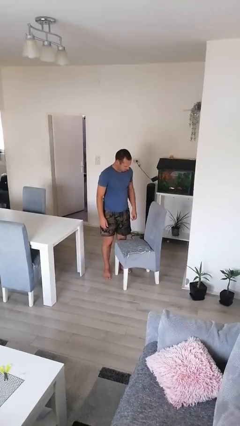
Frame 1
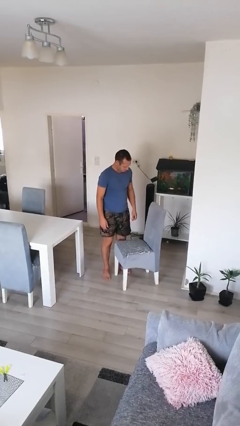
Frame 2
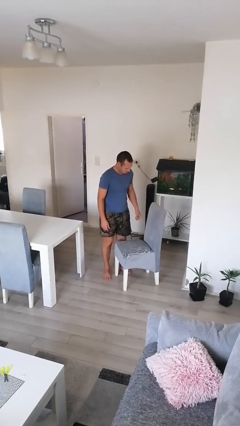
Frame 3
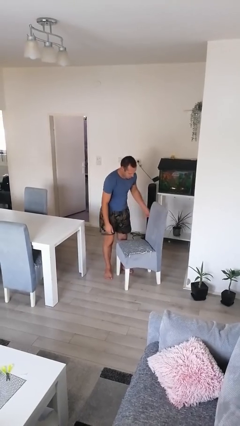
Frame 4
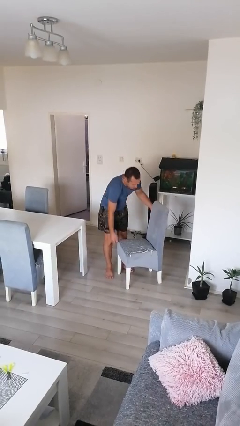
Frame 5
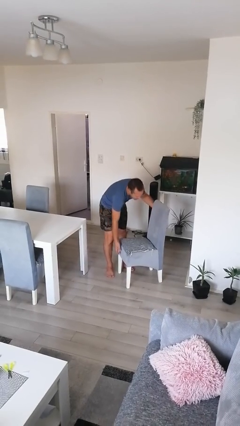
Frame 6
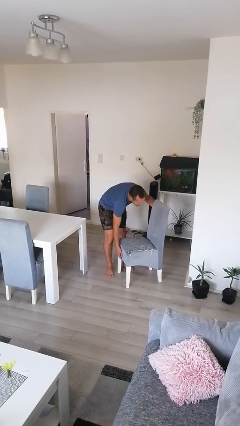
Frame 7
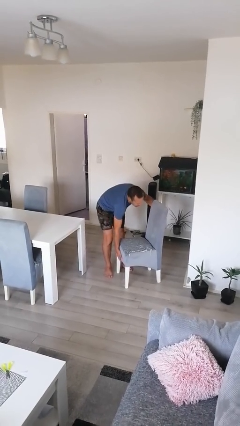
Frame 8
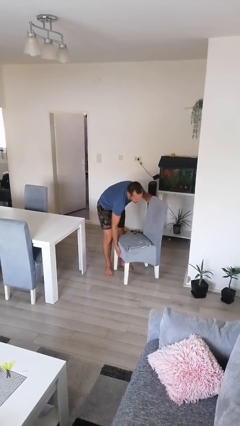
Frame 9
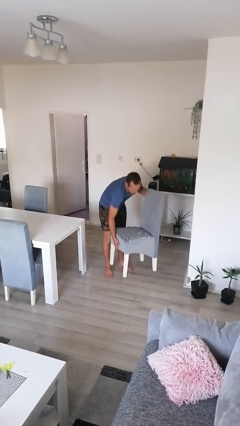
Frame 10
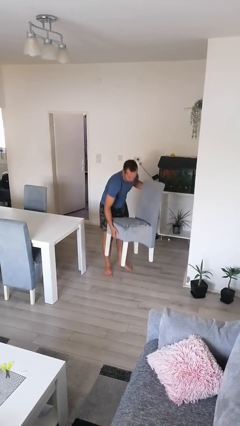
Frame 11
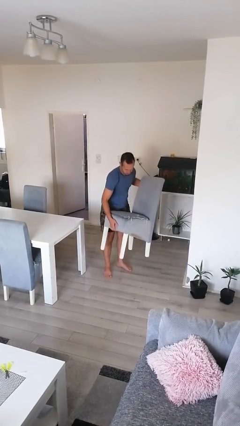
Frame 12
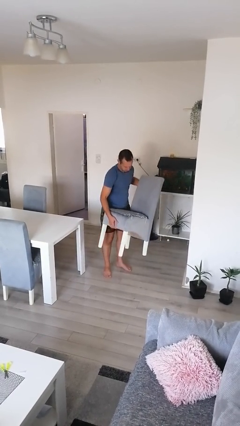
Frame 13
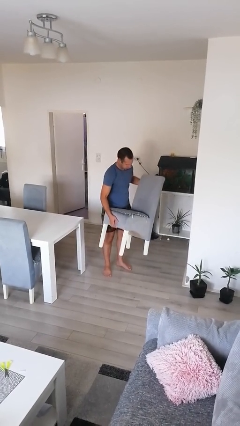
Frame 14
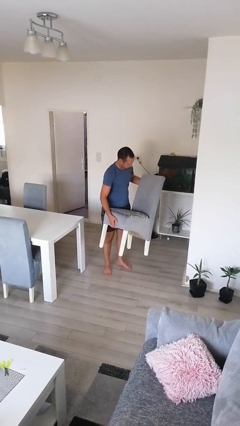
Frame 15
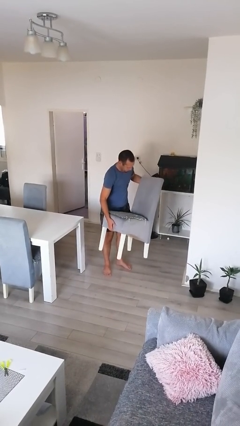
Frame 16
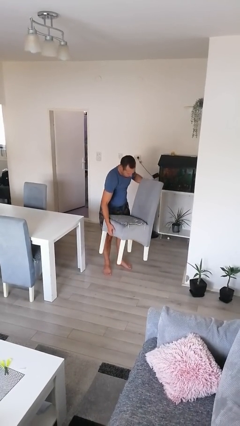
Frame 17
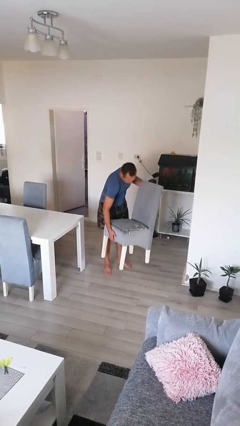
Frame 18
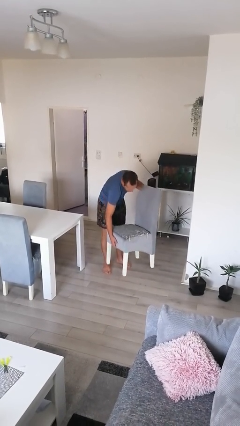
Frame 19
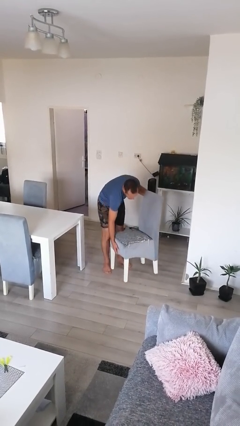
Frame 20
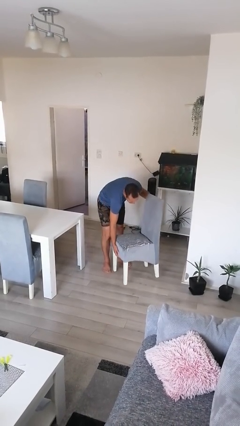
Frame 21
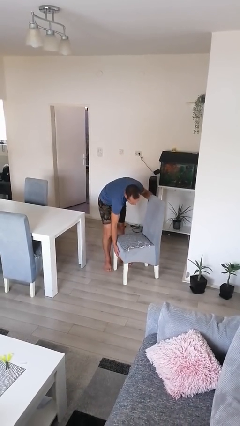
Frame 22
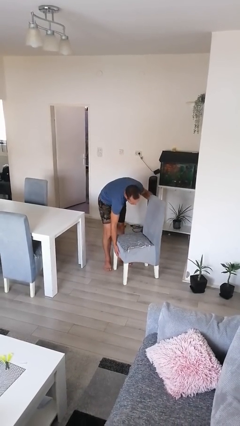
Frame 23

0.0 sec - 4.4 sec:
person sets upright furniture

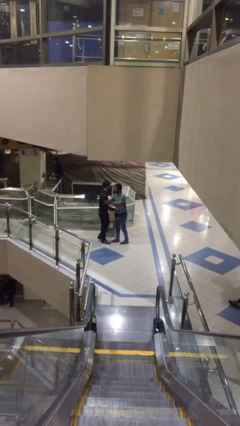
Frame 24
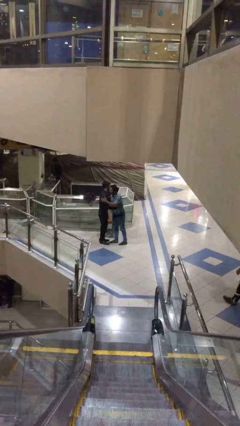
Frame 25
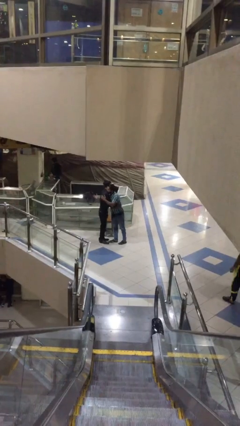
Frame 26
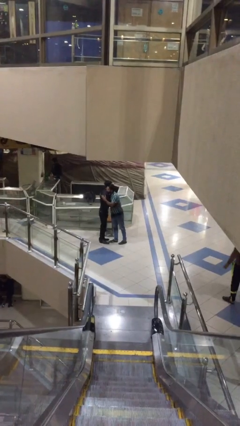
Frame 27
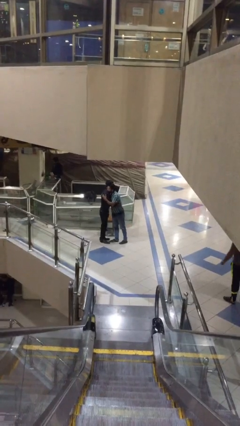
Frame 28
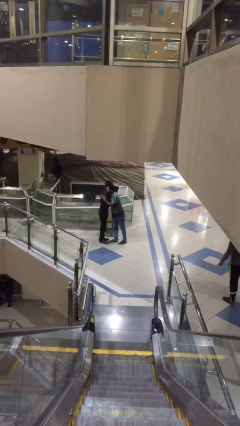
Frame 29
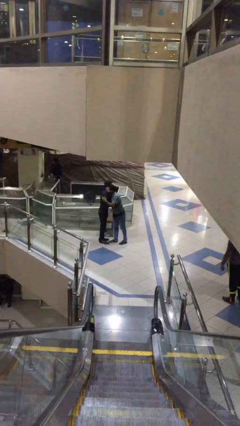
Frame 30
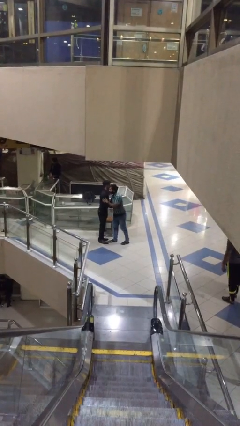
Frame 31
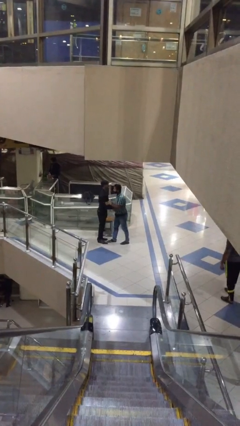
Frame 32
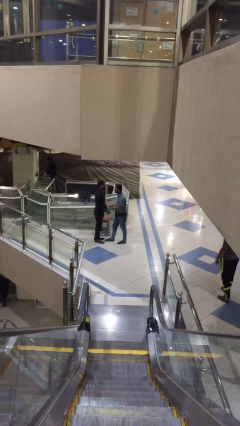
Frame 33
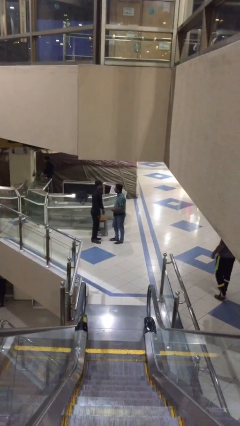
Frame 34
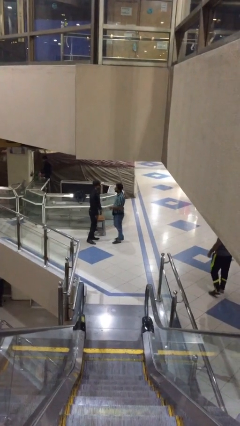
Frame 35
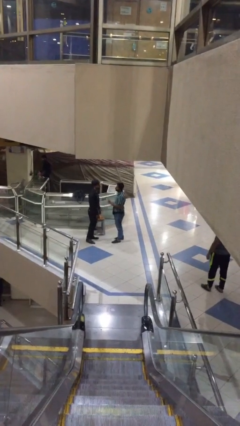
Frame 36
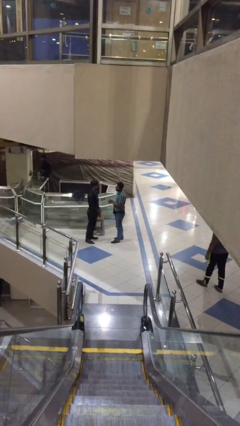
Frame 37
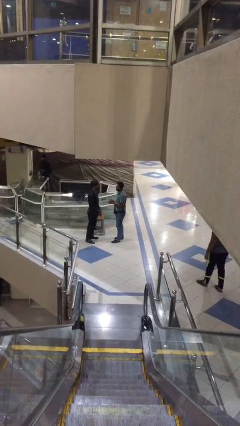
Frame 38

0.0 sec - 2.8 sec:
person embraces person

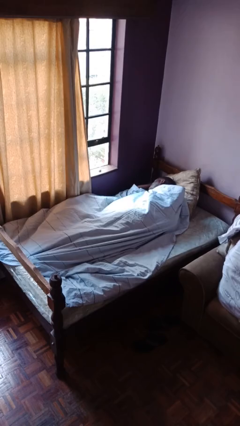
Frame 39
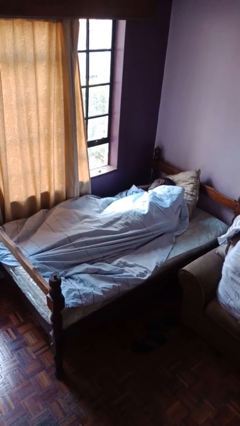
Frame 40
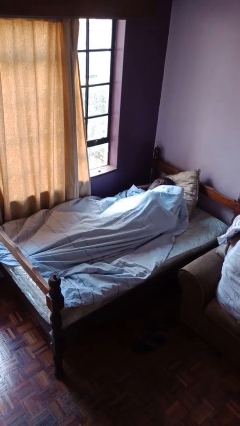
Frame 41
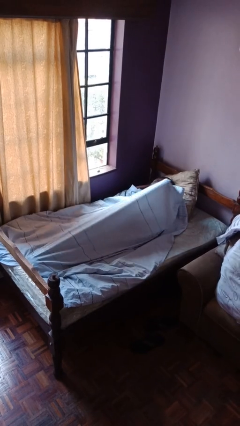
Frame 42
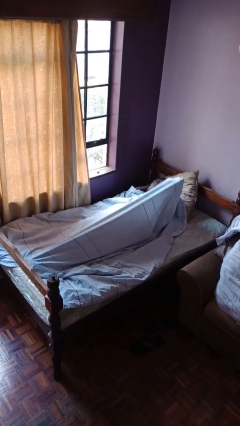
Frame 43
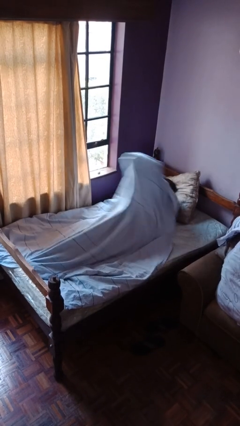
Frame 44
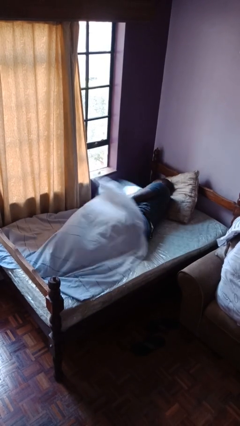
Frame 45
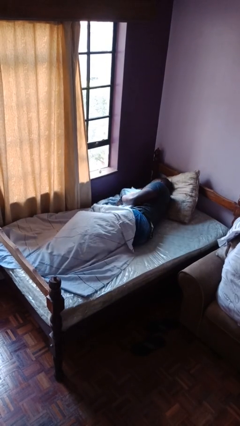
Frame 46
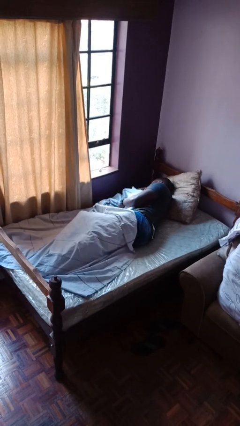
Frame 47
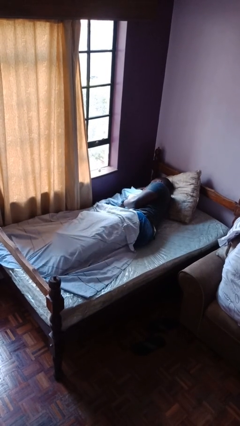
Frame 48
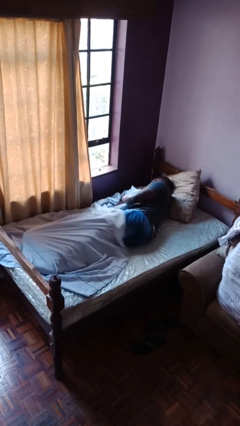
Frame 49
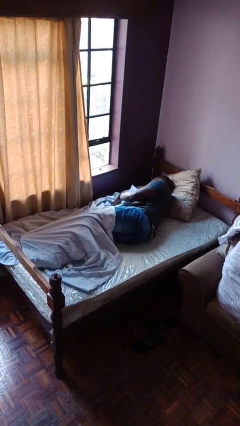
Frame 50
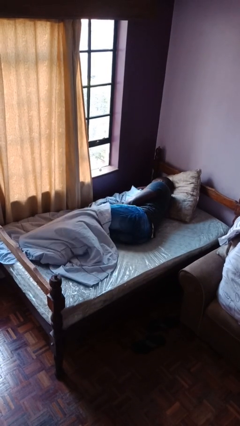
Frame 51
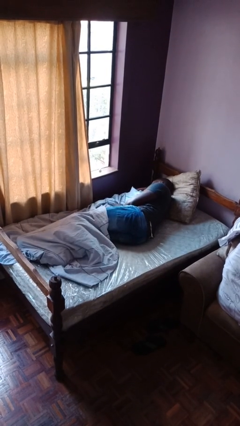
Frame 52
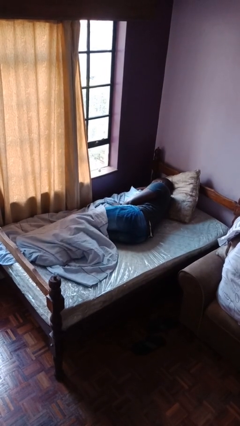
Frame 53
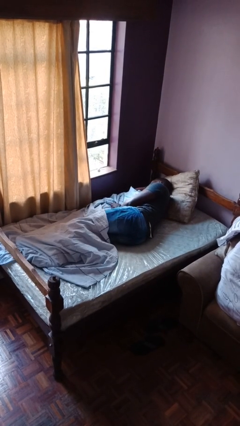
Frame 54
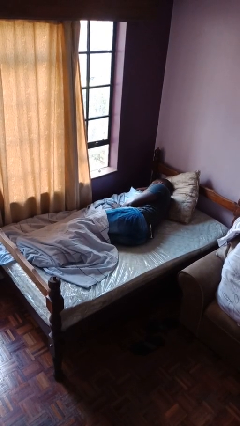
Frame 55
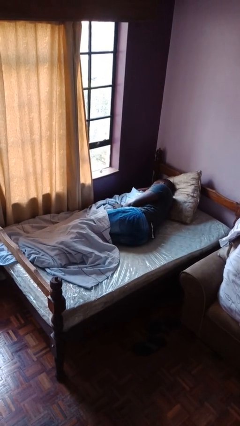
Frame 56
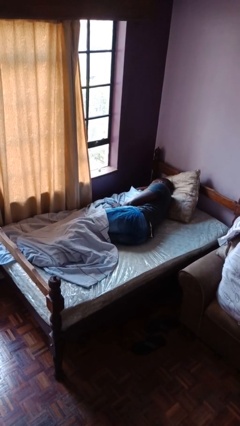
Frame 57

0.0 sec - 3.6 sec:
person uncovers with bedsheets

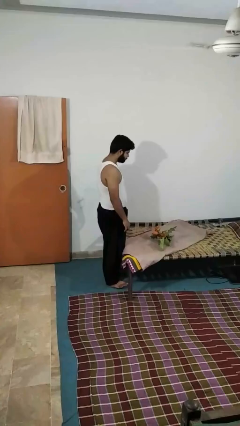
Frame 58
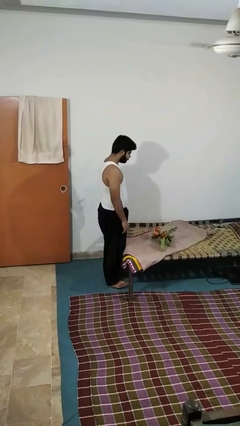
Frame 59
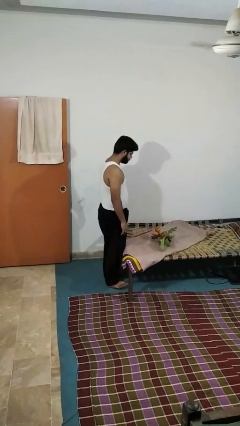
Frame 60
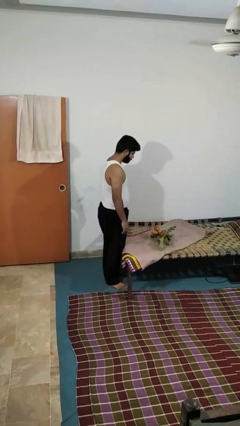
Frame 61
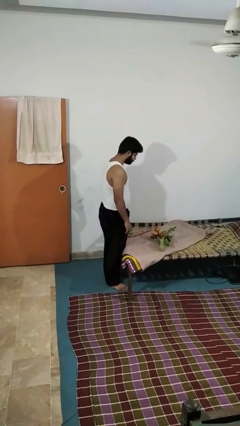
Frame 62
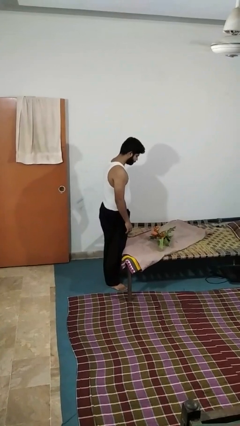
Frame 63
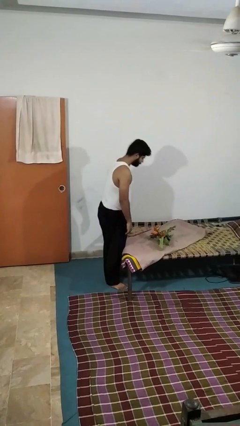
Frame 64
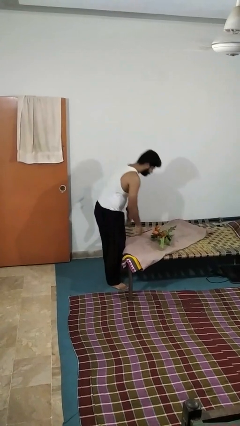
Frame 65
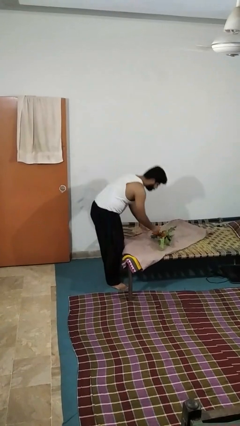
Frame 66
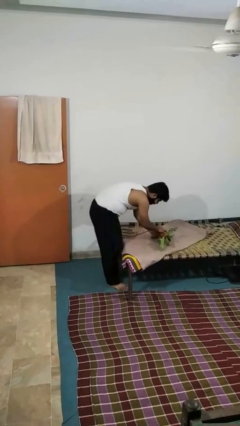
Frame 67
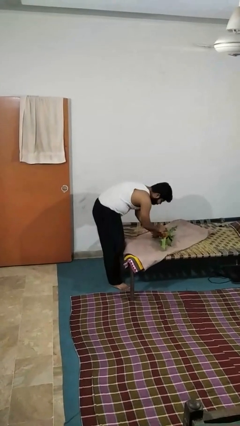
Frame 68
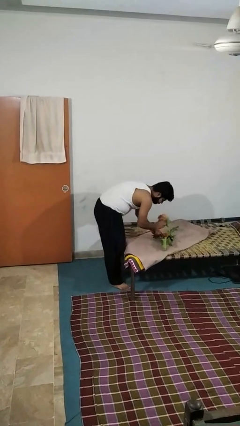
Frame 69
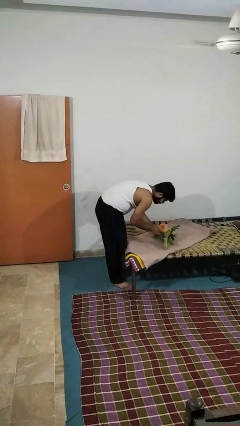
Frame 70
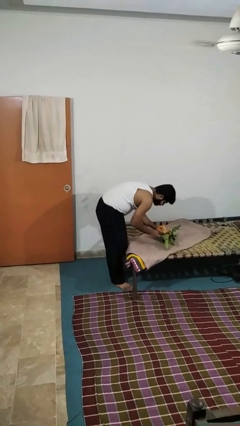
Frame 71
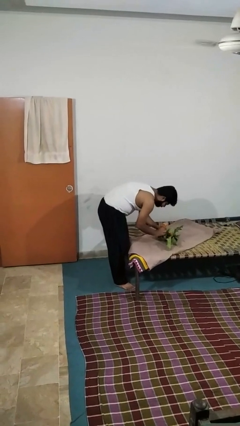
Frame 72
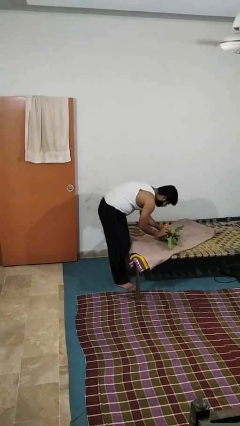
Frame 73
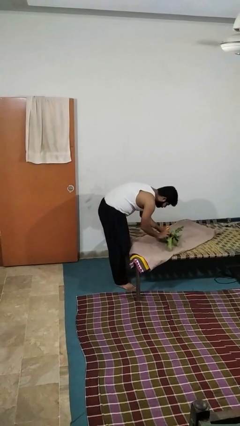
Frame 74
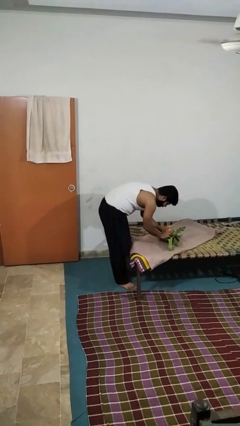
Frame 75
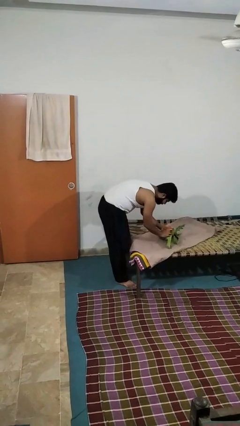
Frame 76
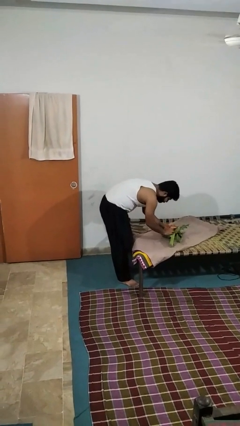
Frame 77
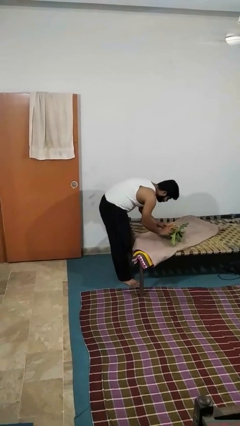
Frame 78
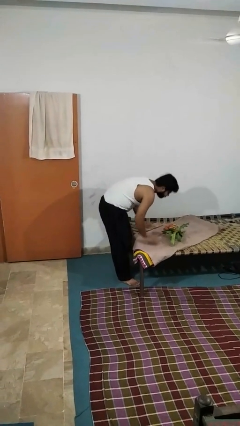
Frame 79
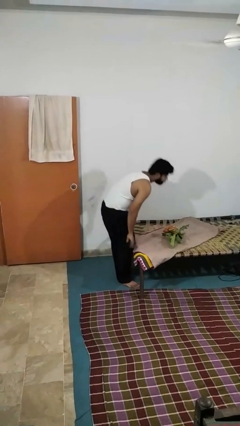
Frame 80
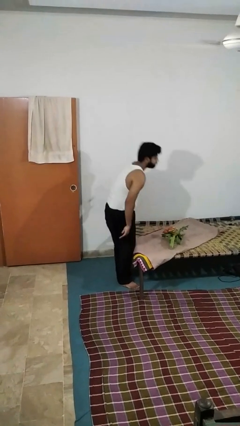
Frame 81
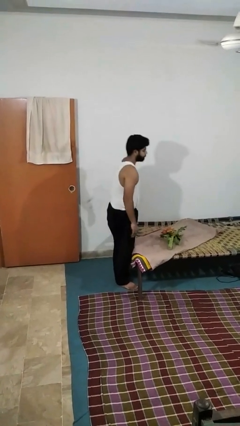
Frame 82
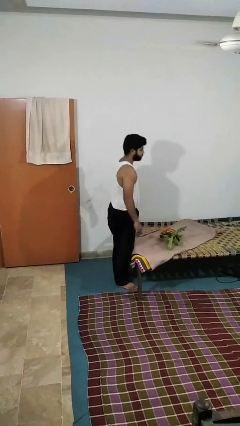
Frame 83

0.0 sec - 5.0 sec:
person arranges flowers in vase

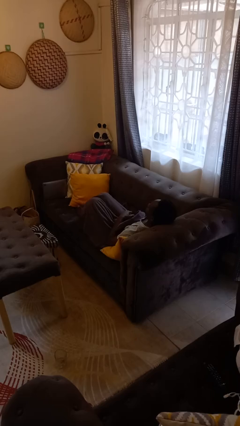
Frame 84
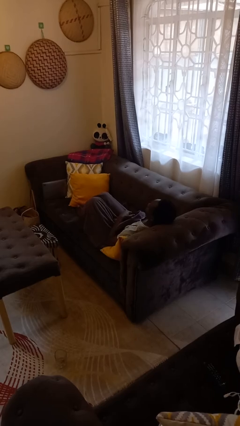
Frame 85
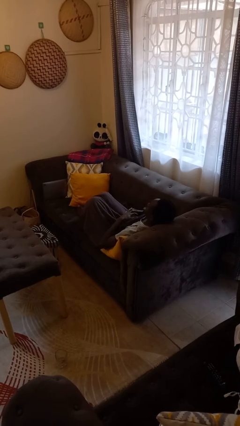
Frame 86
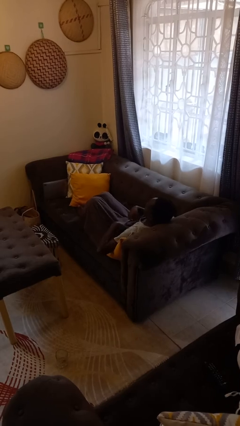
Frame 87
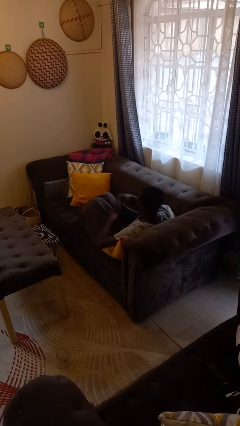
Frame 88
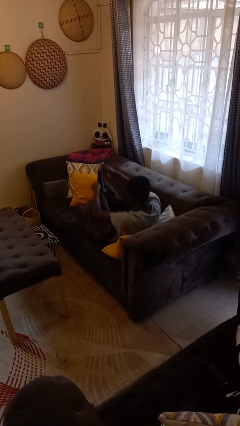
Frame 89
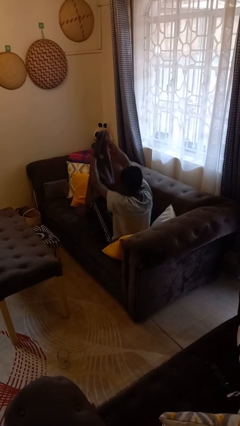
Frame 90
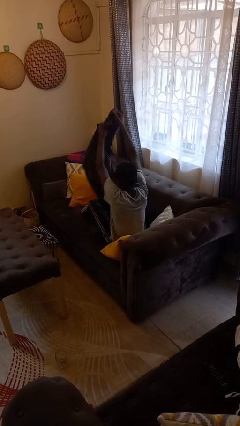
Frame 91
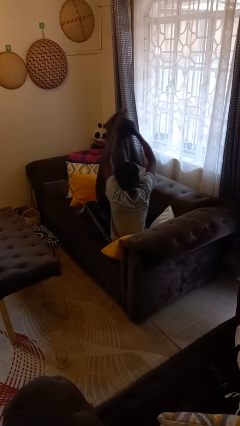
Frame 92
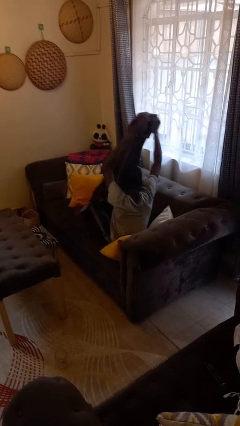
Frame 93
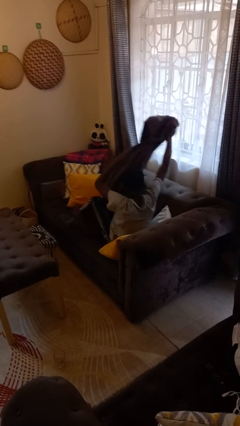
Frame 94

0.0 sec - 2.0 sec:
person uncovers with blanket
